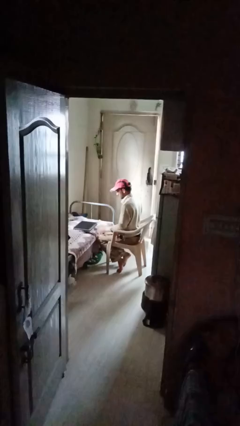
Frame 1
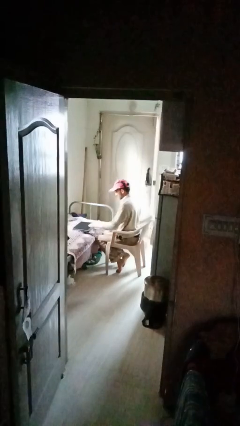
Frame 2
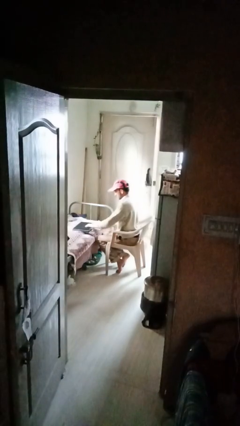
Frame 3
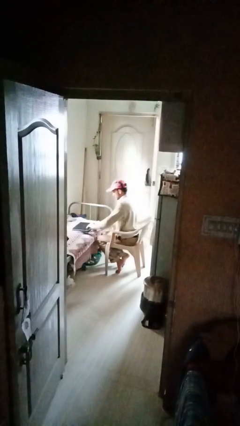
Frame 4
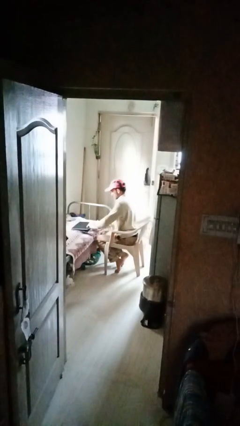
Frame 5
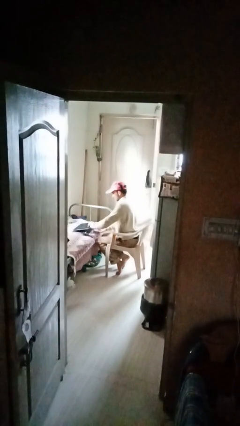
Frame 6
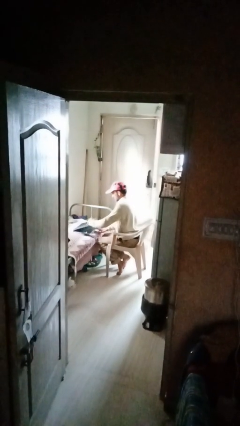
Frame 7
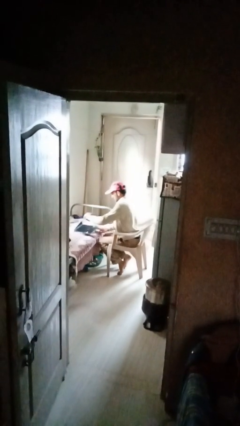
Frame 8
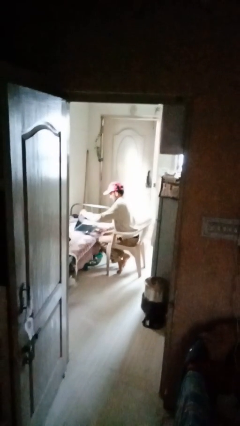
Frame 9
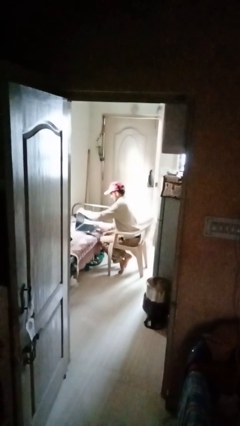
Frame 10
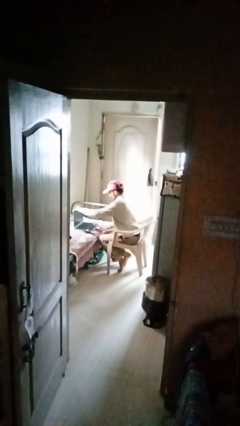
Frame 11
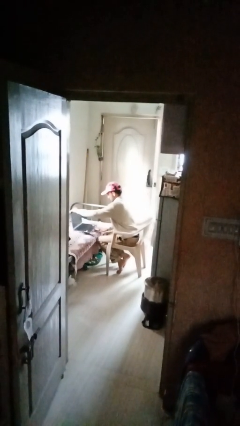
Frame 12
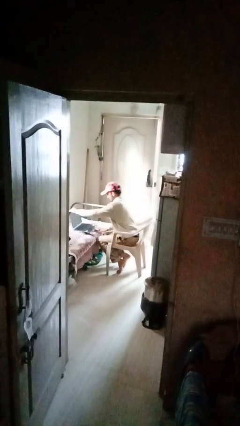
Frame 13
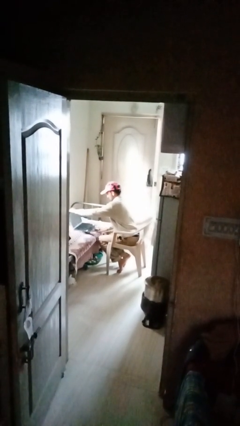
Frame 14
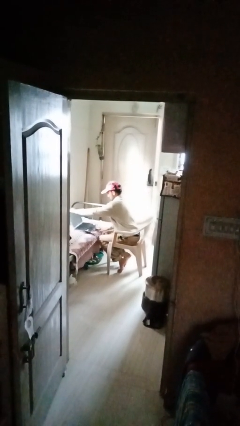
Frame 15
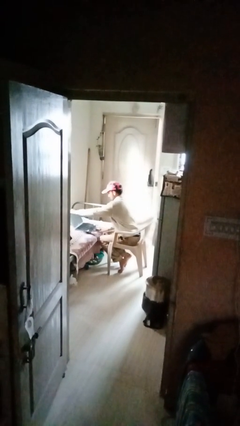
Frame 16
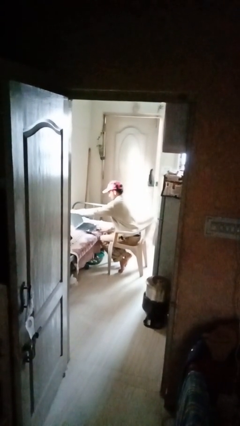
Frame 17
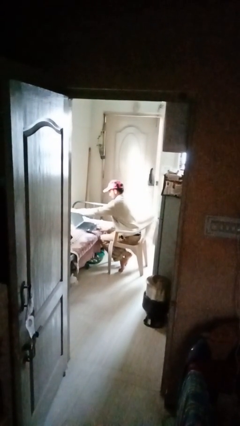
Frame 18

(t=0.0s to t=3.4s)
person opens laptop

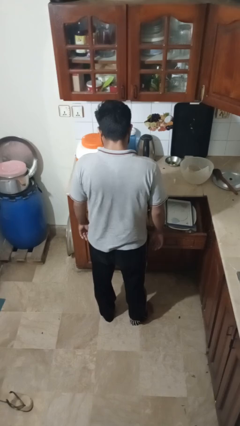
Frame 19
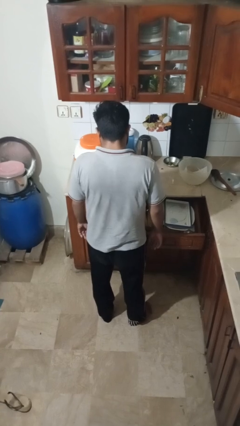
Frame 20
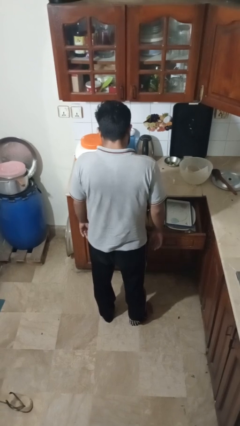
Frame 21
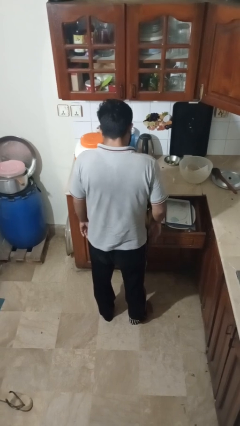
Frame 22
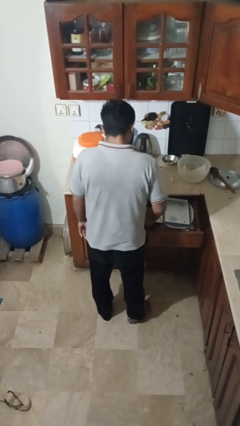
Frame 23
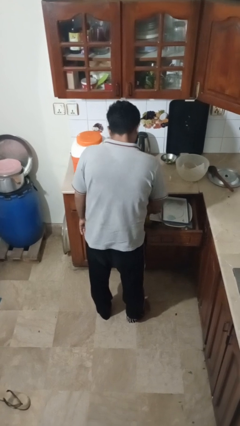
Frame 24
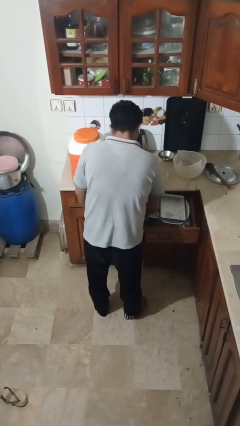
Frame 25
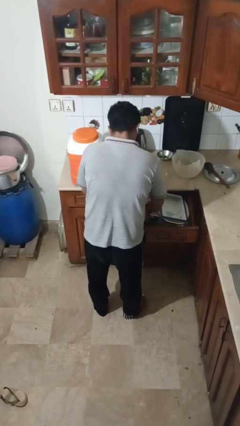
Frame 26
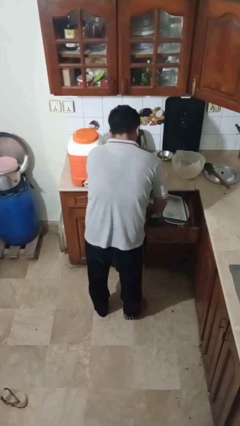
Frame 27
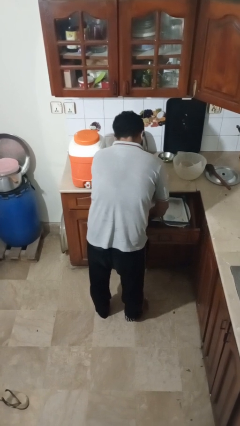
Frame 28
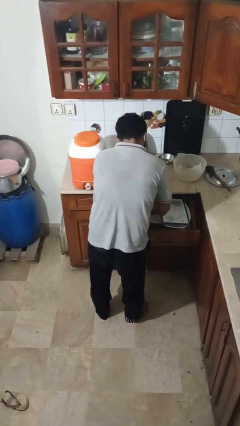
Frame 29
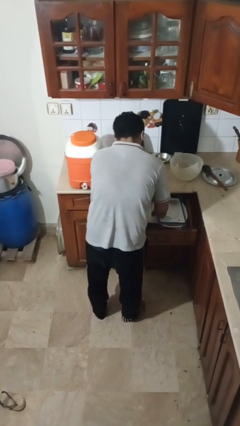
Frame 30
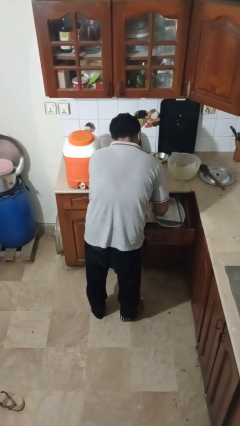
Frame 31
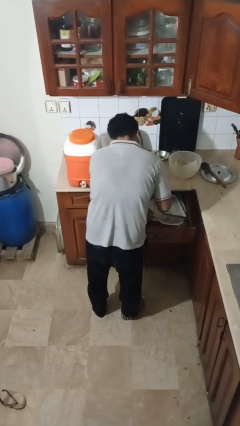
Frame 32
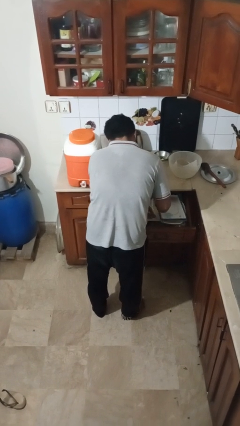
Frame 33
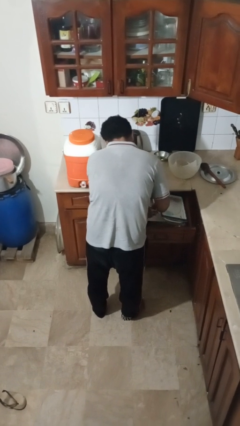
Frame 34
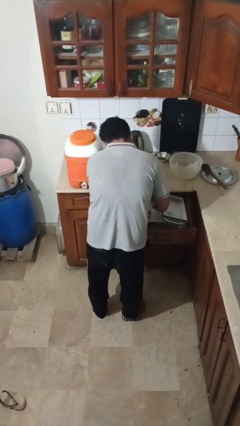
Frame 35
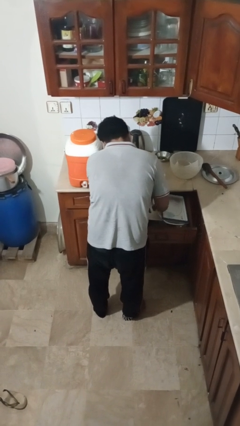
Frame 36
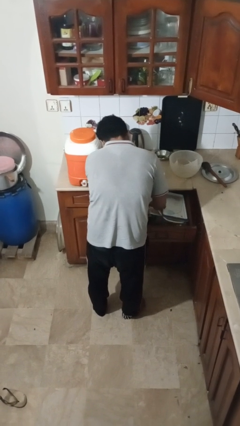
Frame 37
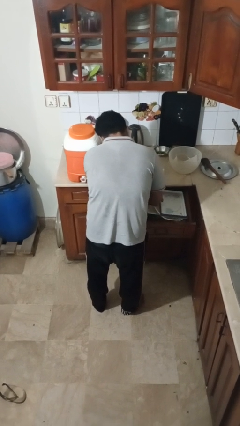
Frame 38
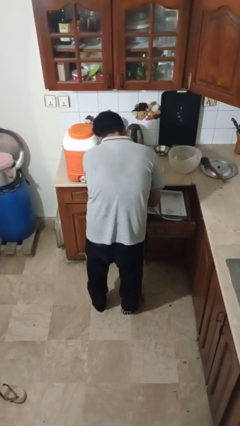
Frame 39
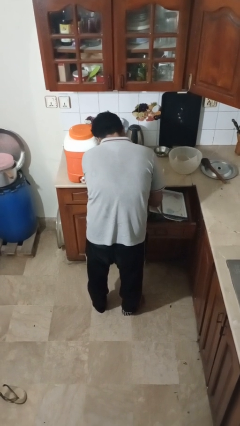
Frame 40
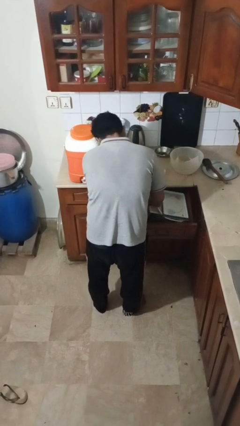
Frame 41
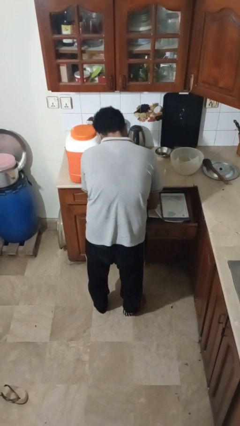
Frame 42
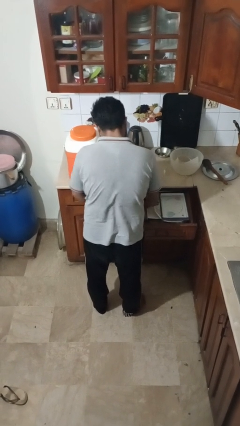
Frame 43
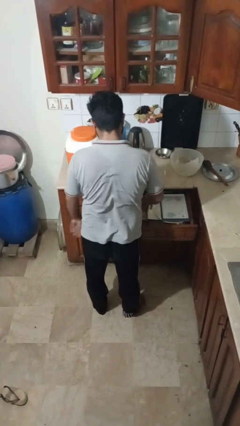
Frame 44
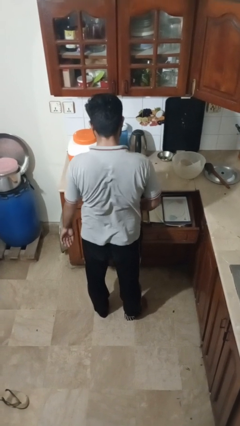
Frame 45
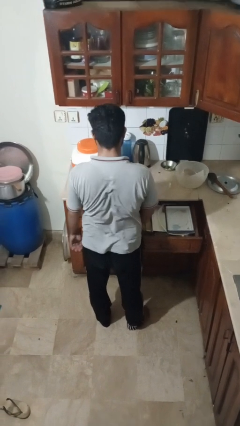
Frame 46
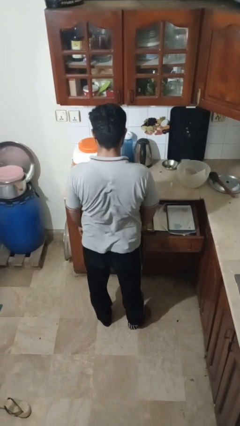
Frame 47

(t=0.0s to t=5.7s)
person searches in kitchen drawer

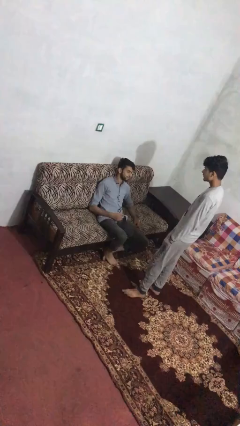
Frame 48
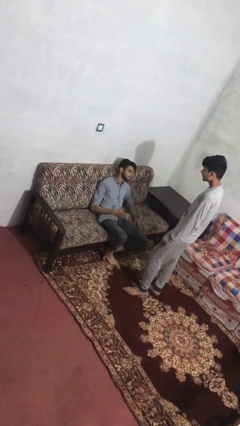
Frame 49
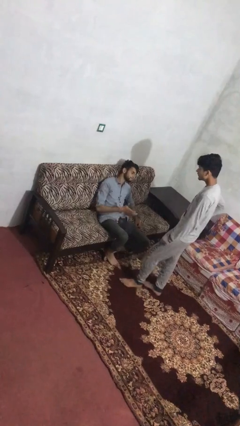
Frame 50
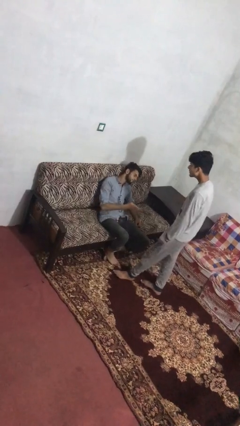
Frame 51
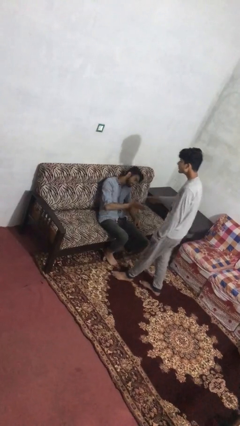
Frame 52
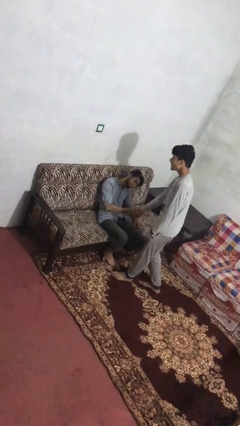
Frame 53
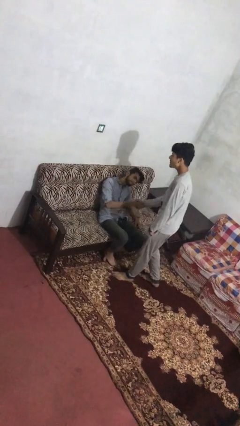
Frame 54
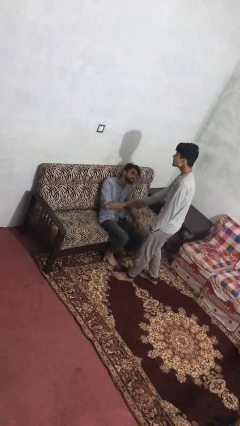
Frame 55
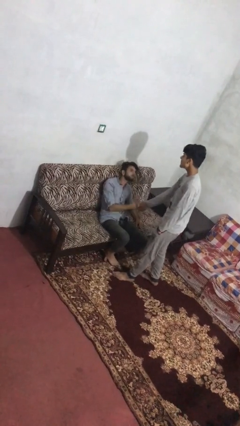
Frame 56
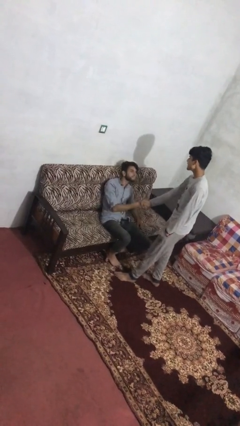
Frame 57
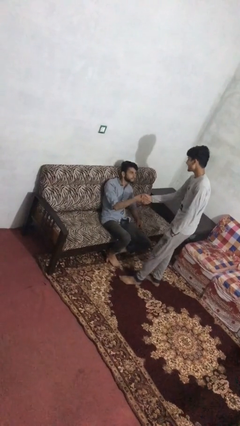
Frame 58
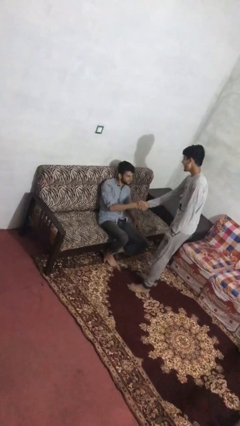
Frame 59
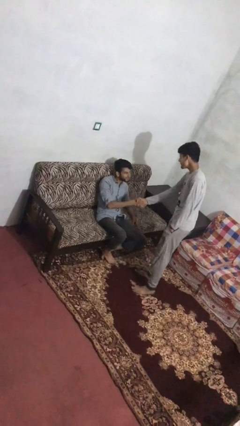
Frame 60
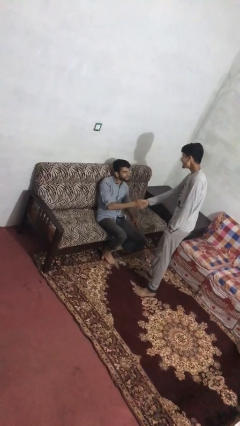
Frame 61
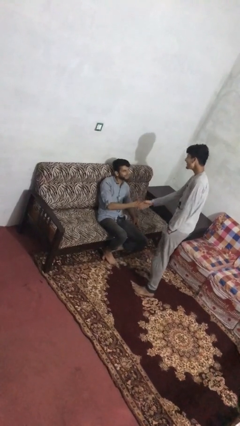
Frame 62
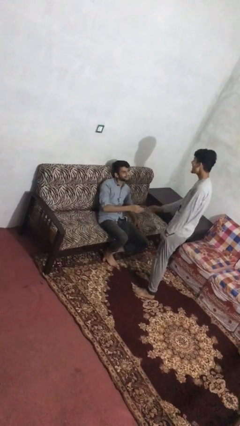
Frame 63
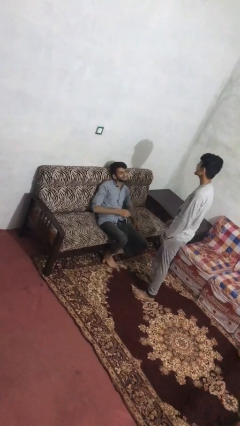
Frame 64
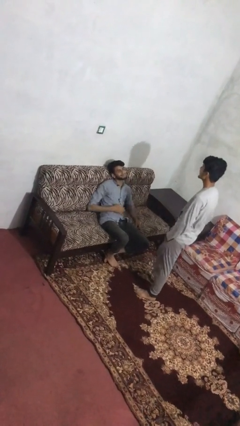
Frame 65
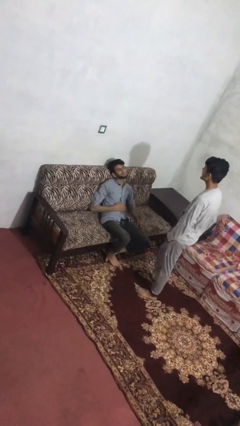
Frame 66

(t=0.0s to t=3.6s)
person shakes hand

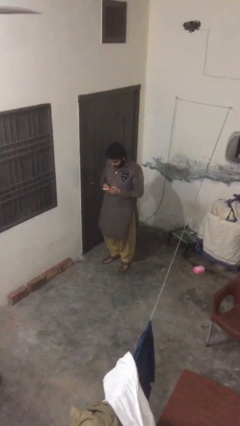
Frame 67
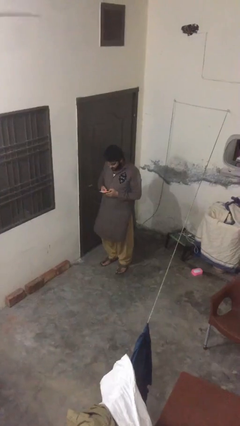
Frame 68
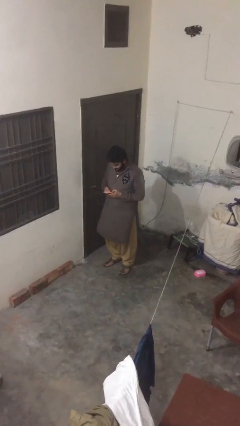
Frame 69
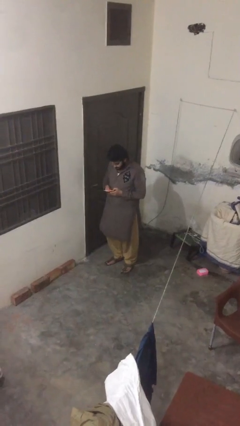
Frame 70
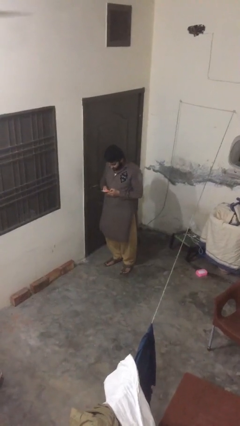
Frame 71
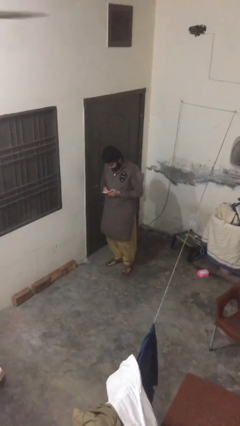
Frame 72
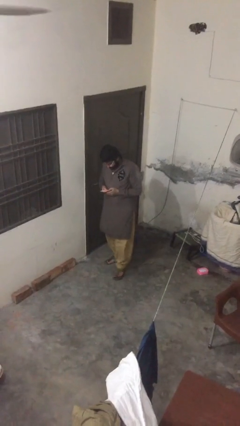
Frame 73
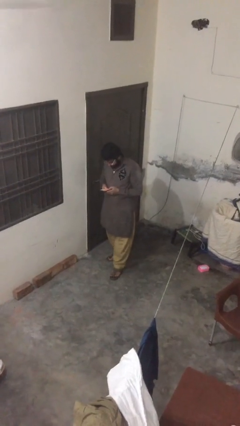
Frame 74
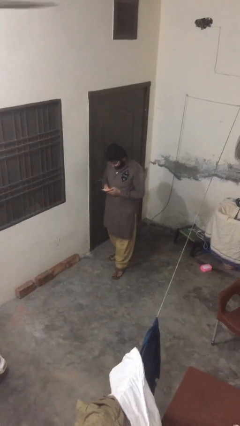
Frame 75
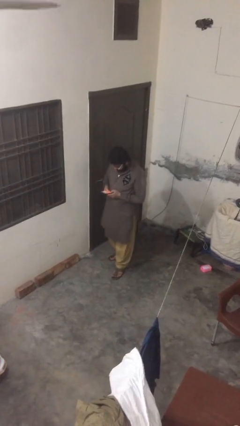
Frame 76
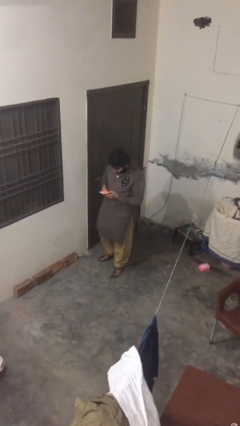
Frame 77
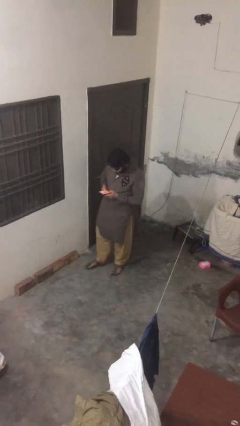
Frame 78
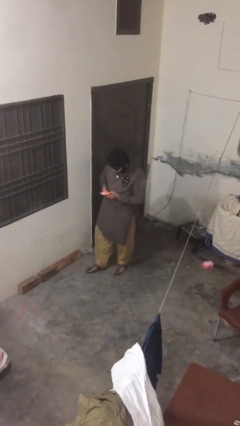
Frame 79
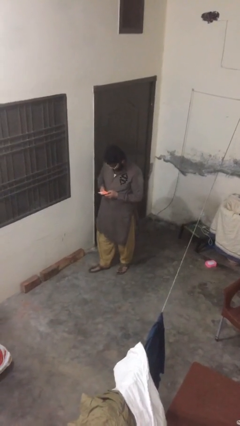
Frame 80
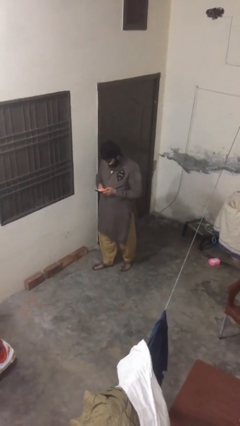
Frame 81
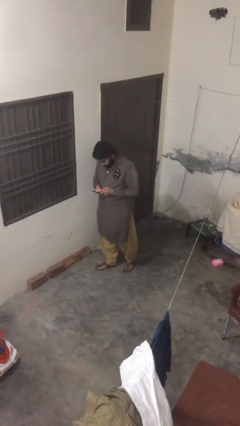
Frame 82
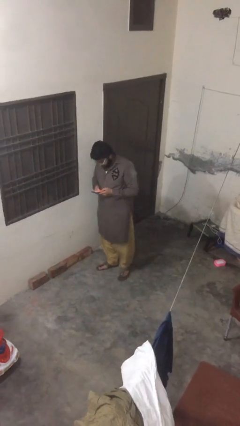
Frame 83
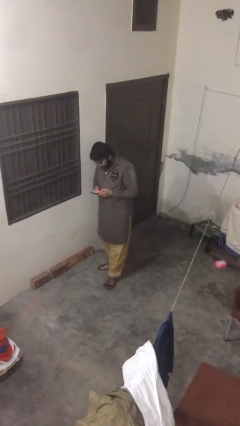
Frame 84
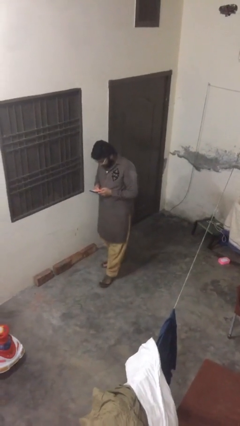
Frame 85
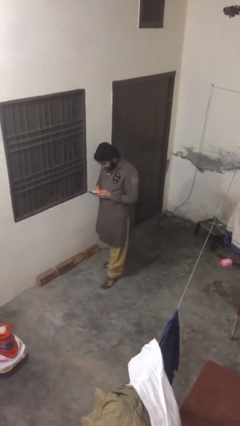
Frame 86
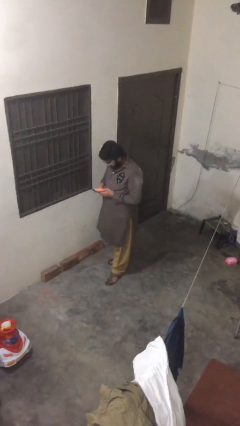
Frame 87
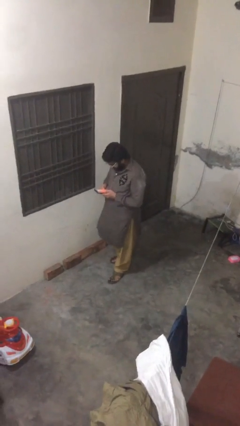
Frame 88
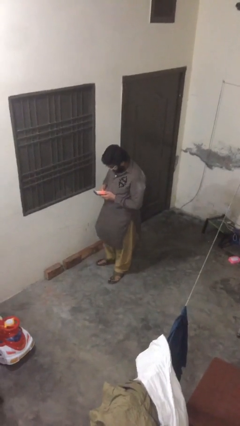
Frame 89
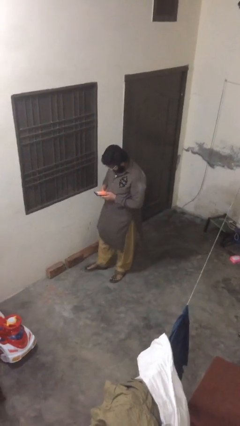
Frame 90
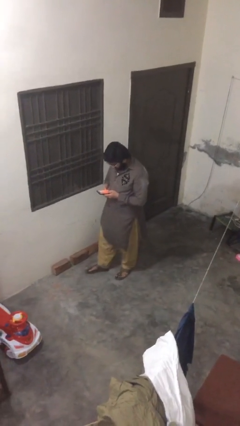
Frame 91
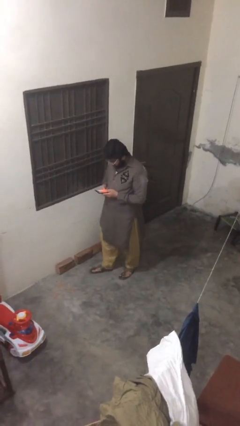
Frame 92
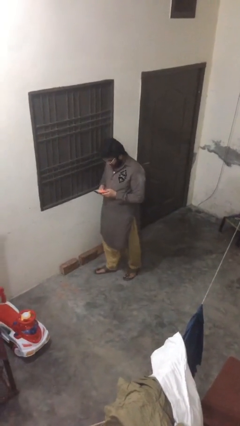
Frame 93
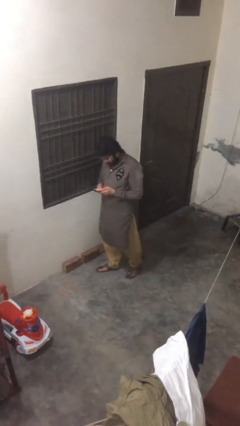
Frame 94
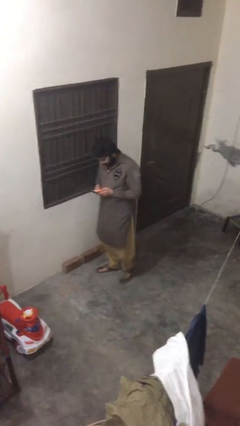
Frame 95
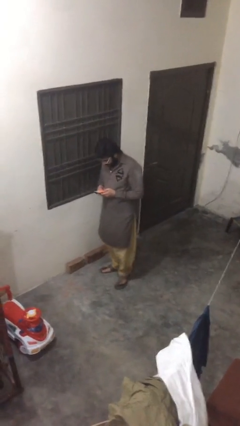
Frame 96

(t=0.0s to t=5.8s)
person texts on phone
